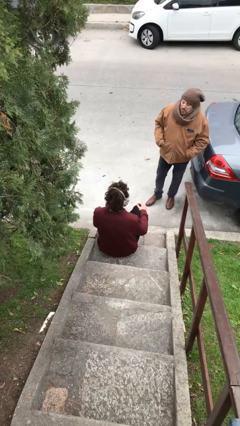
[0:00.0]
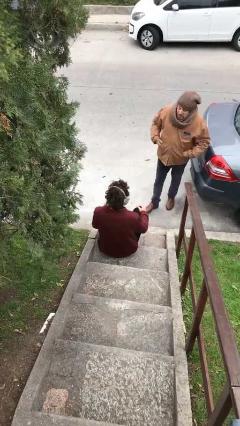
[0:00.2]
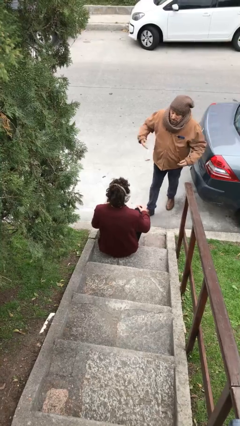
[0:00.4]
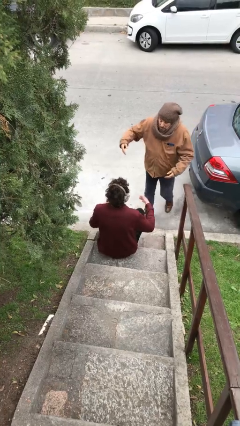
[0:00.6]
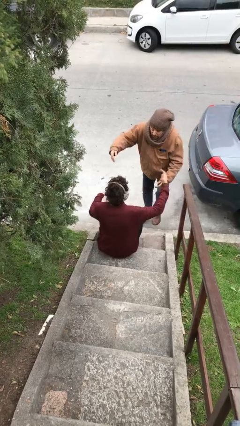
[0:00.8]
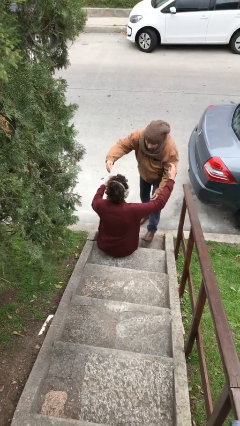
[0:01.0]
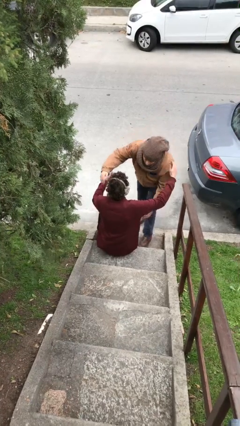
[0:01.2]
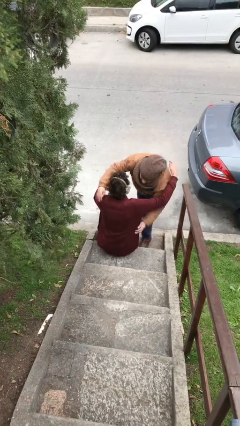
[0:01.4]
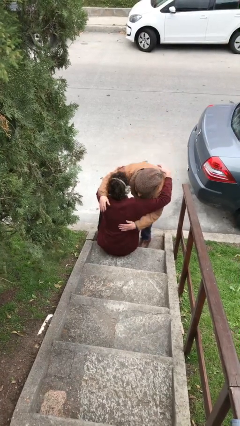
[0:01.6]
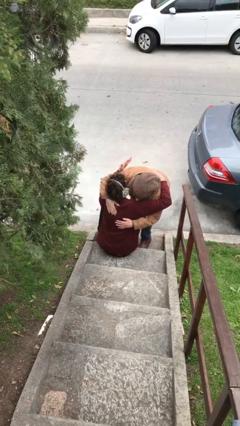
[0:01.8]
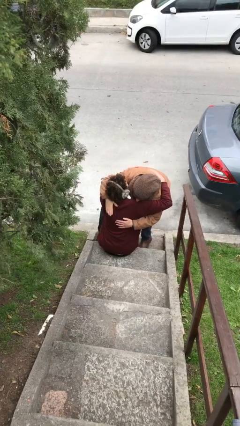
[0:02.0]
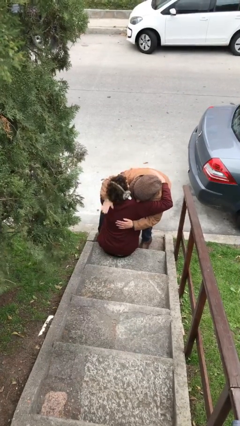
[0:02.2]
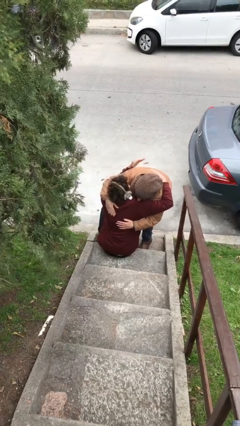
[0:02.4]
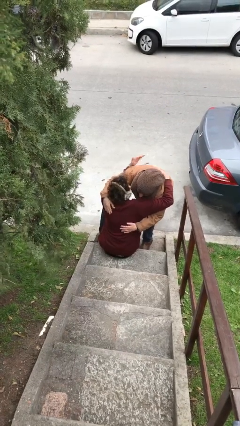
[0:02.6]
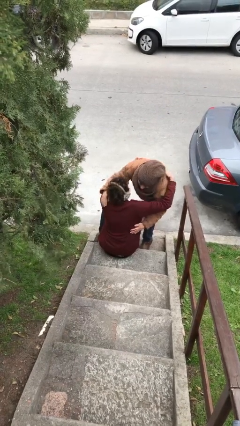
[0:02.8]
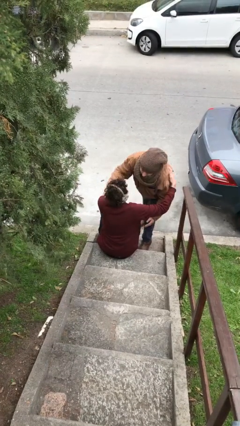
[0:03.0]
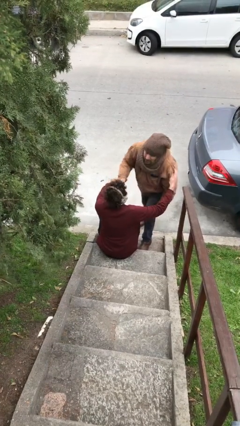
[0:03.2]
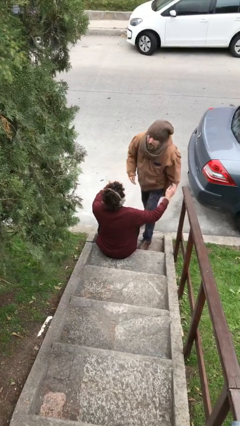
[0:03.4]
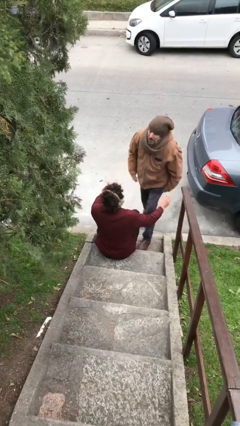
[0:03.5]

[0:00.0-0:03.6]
person embraces person

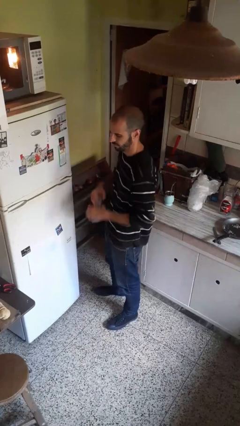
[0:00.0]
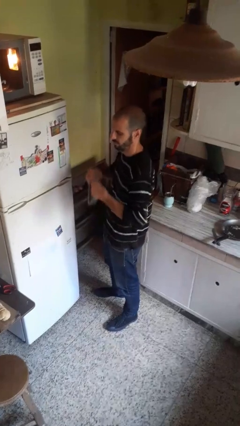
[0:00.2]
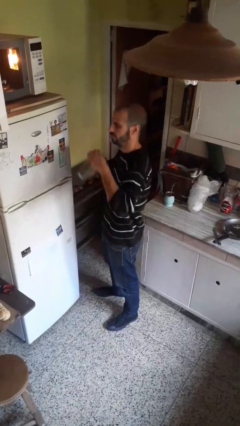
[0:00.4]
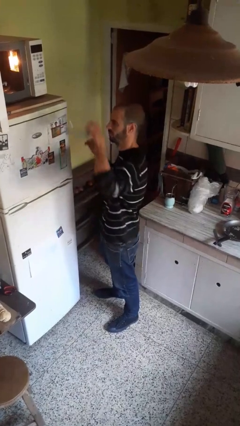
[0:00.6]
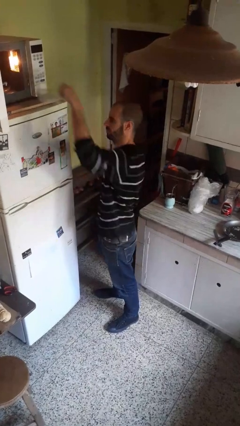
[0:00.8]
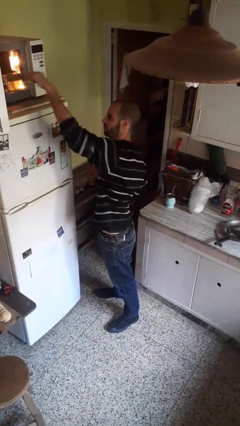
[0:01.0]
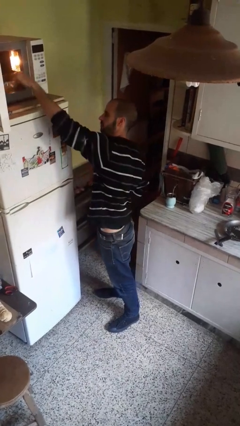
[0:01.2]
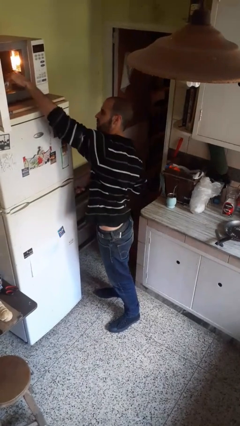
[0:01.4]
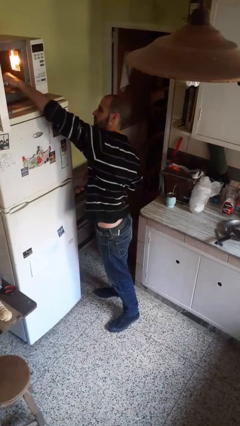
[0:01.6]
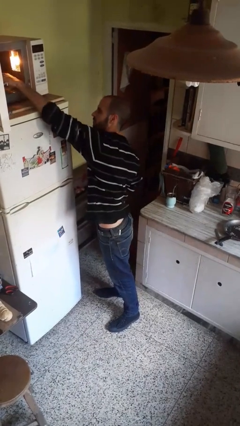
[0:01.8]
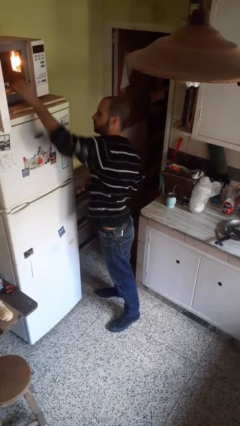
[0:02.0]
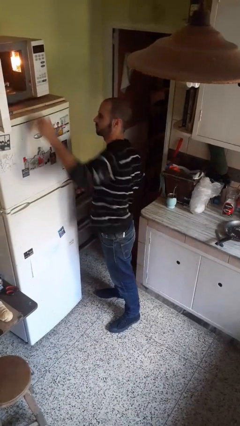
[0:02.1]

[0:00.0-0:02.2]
person puts object into microwave

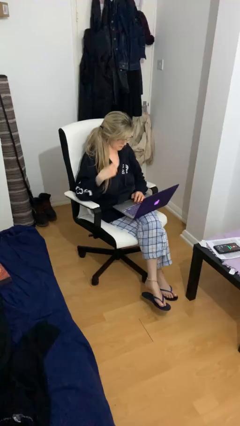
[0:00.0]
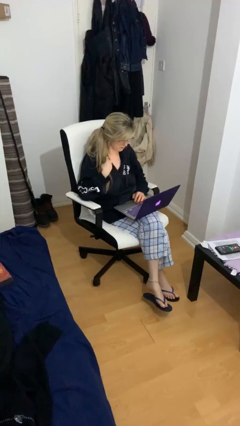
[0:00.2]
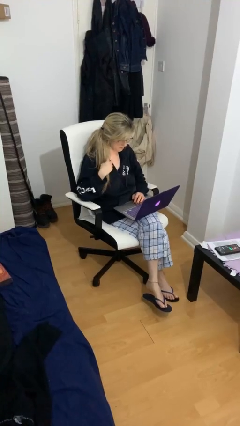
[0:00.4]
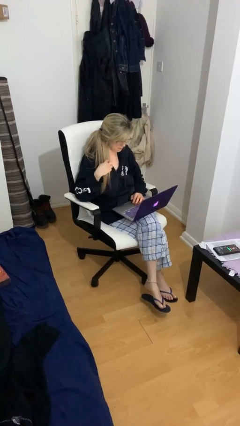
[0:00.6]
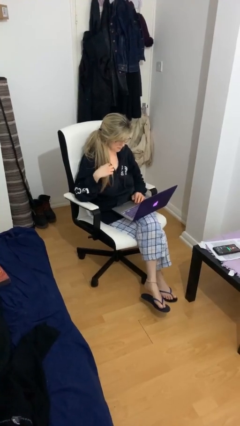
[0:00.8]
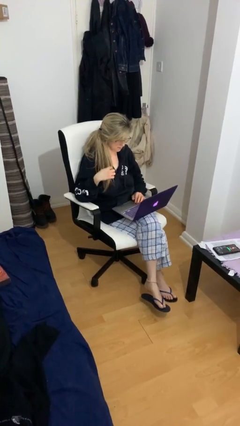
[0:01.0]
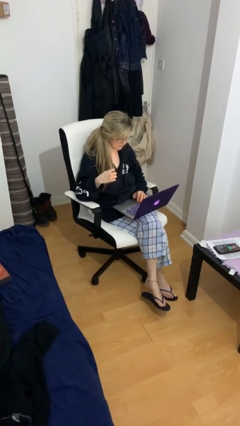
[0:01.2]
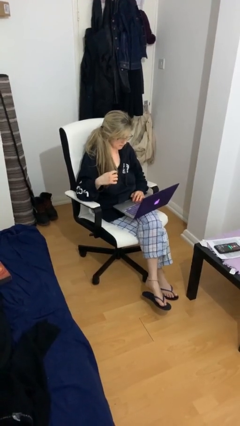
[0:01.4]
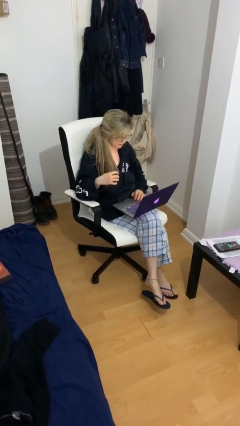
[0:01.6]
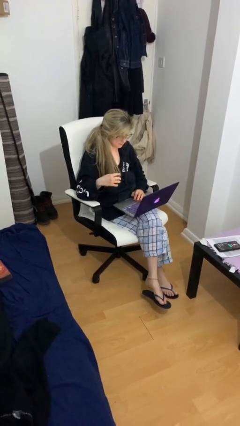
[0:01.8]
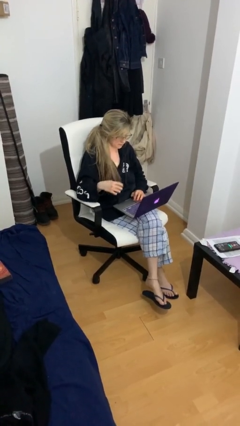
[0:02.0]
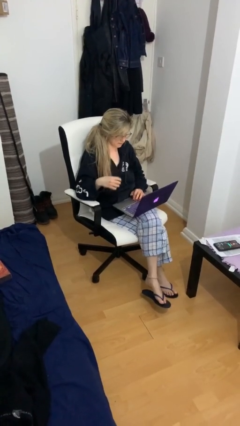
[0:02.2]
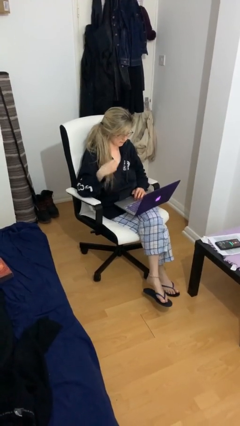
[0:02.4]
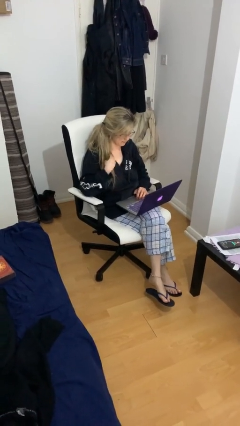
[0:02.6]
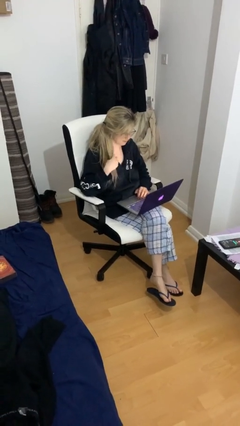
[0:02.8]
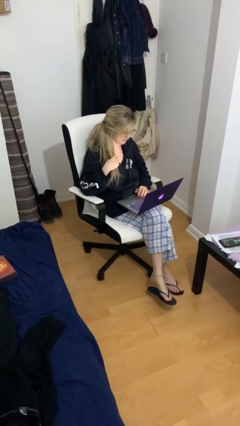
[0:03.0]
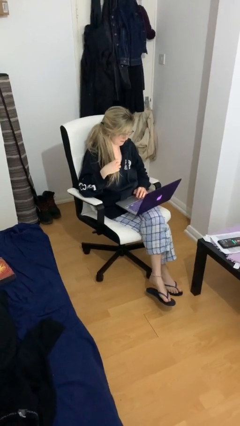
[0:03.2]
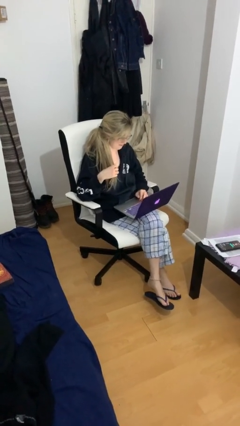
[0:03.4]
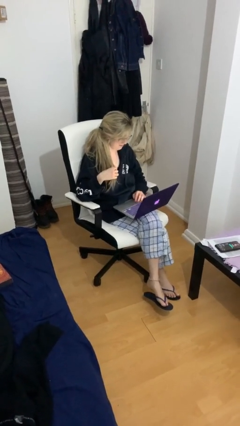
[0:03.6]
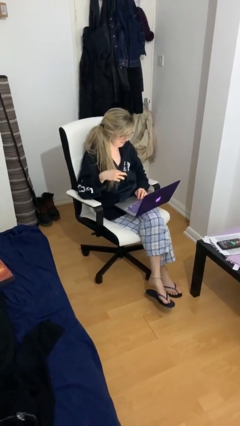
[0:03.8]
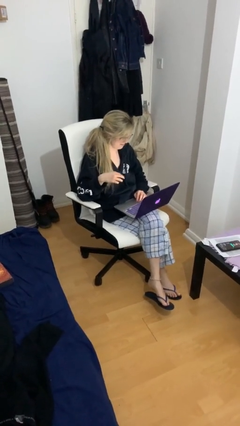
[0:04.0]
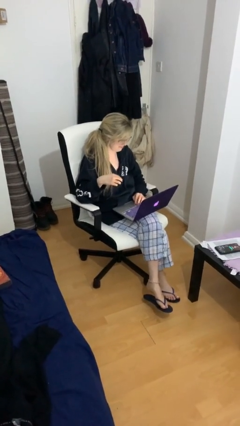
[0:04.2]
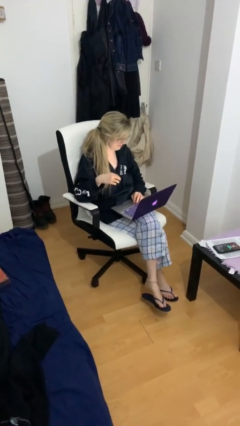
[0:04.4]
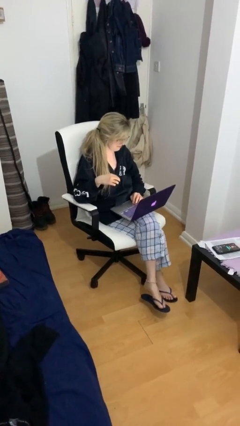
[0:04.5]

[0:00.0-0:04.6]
person interacts with laptop

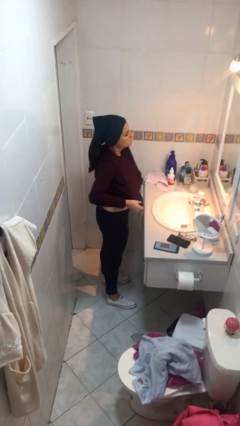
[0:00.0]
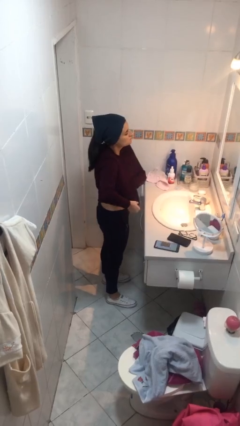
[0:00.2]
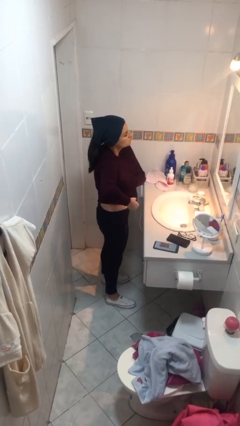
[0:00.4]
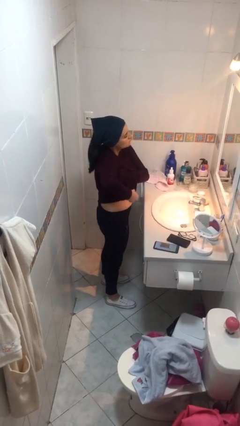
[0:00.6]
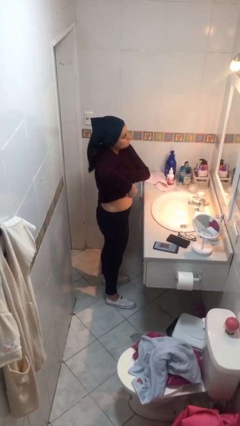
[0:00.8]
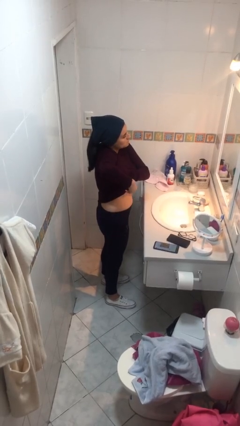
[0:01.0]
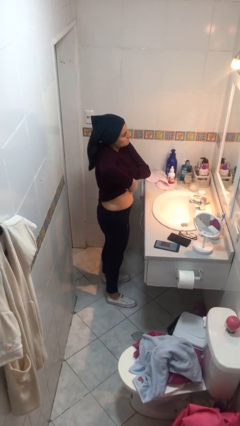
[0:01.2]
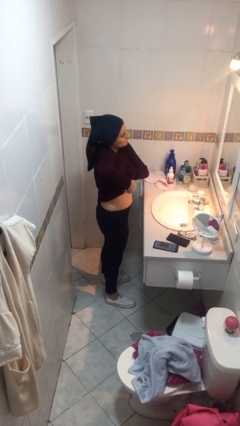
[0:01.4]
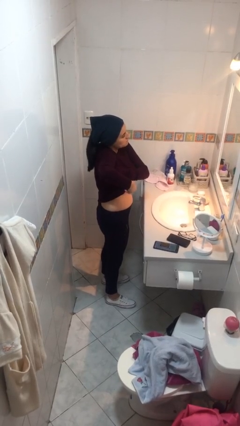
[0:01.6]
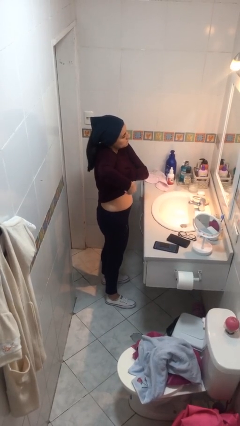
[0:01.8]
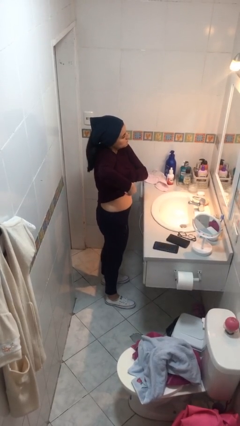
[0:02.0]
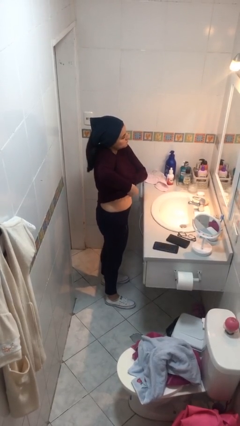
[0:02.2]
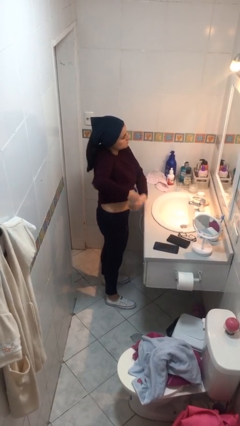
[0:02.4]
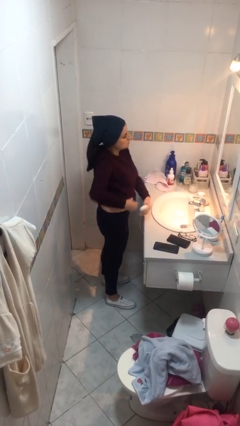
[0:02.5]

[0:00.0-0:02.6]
person applies deodorant

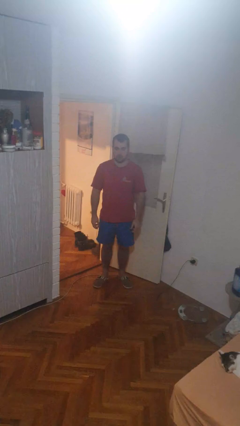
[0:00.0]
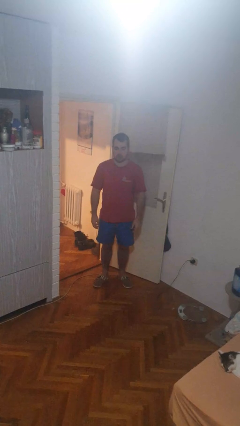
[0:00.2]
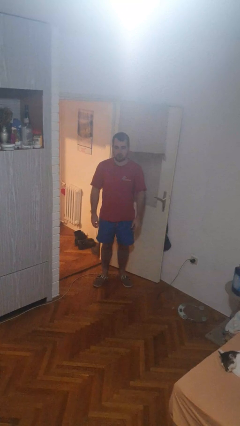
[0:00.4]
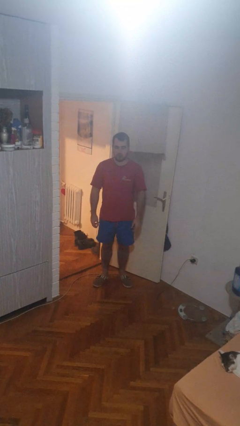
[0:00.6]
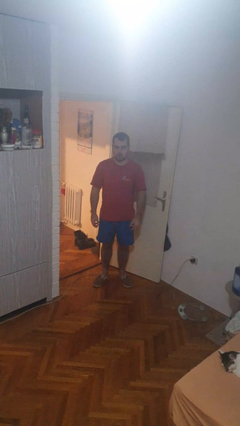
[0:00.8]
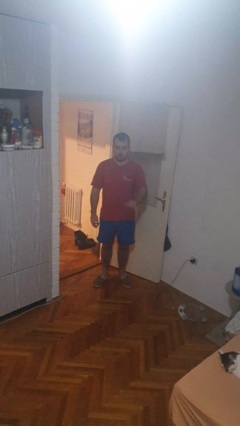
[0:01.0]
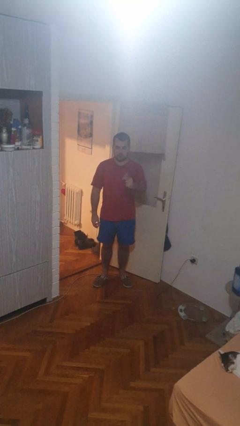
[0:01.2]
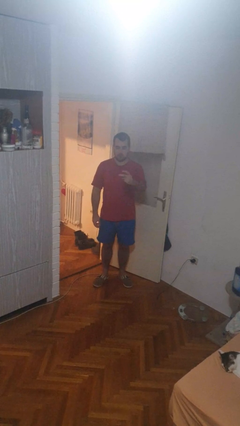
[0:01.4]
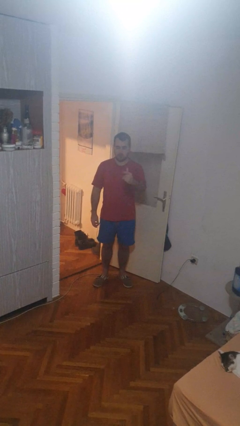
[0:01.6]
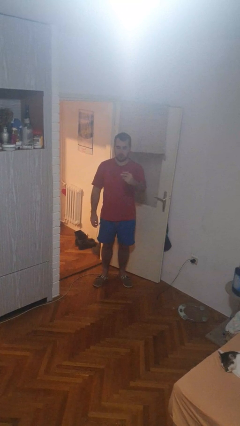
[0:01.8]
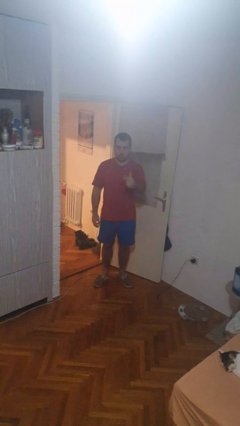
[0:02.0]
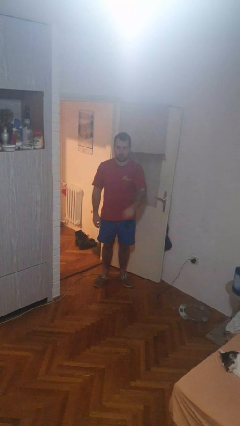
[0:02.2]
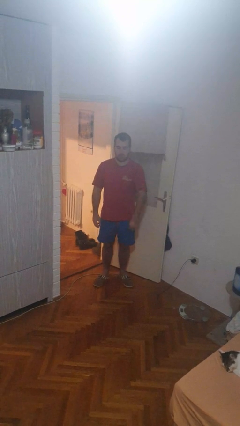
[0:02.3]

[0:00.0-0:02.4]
person snaps fingers

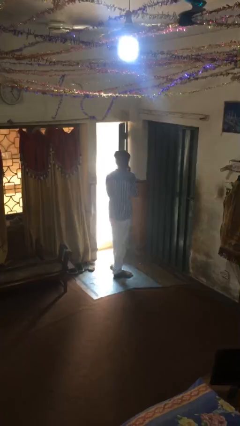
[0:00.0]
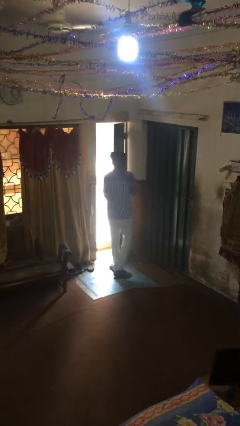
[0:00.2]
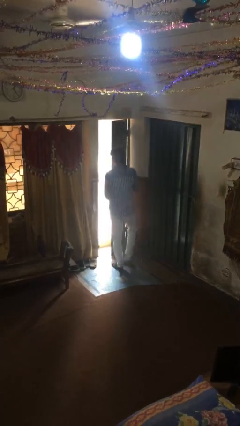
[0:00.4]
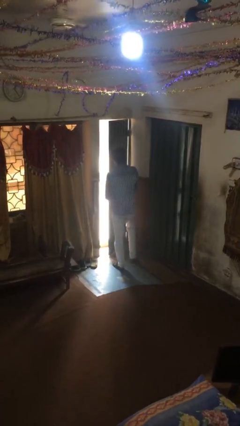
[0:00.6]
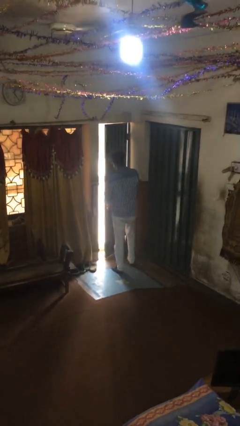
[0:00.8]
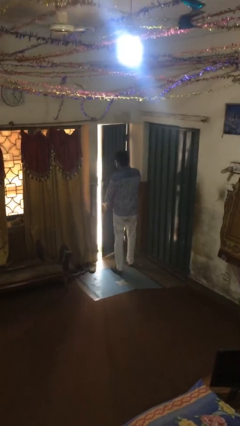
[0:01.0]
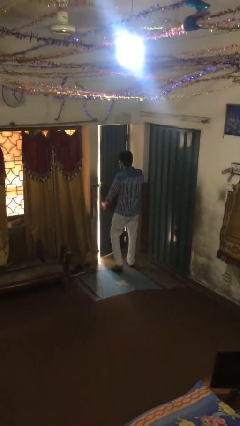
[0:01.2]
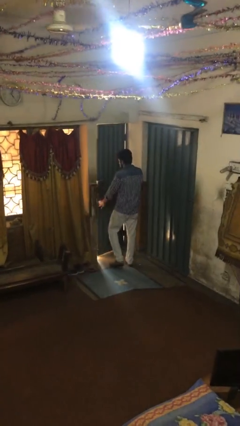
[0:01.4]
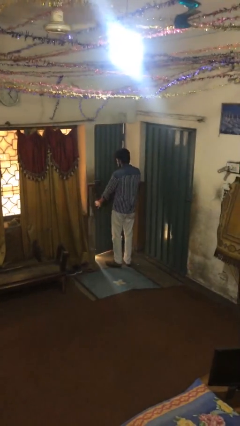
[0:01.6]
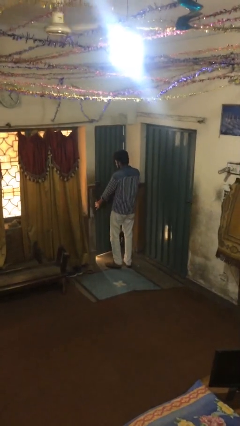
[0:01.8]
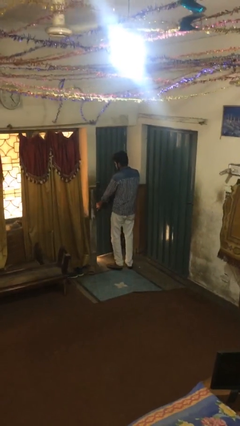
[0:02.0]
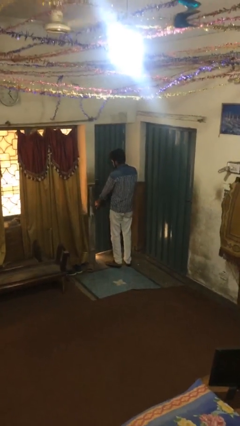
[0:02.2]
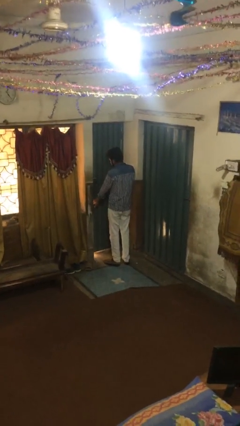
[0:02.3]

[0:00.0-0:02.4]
person closes facility door
